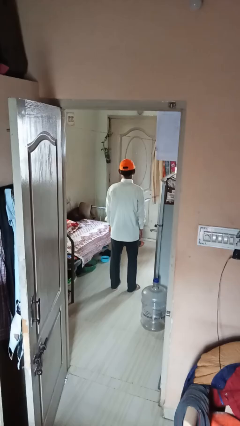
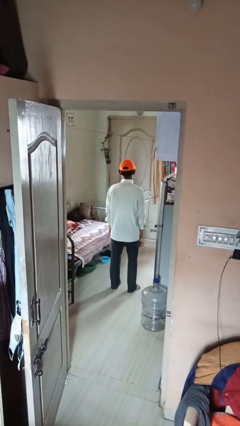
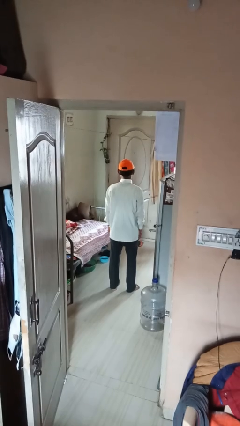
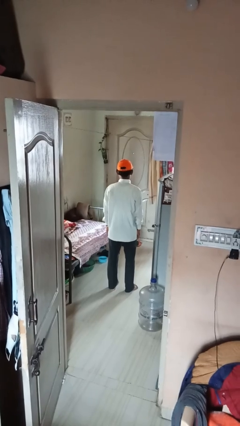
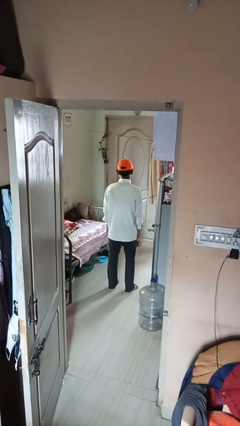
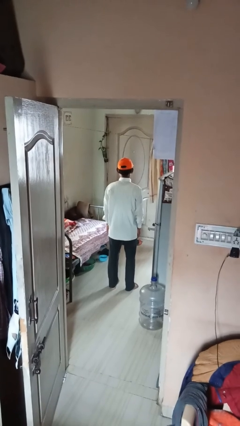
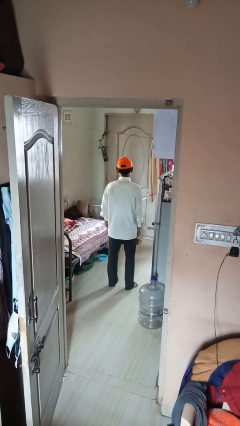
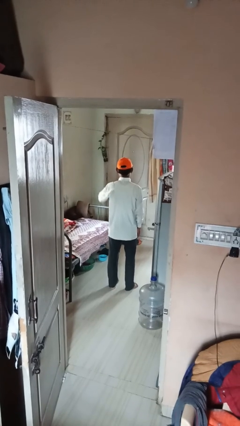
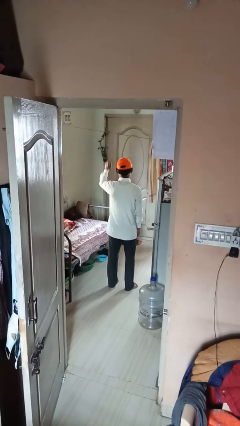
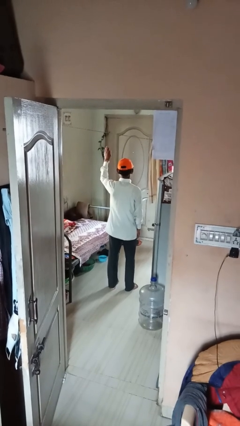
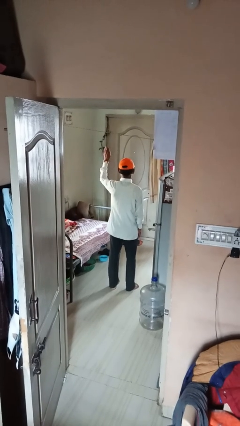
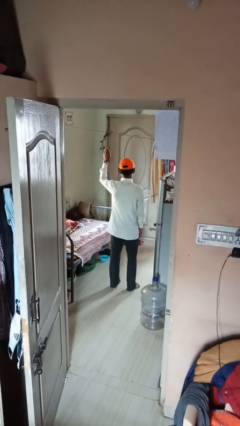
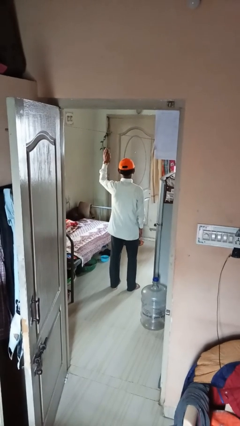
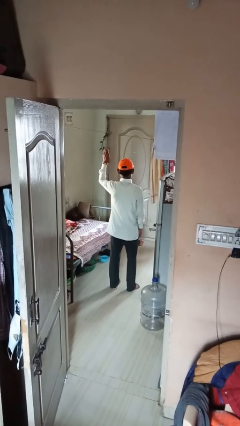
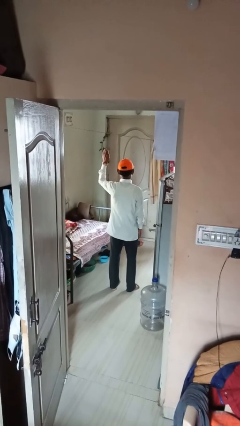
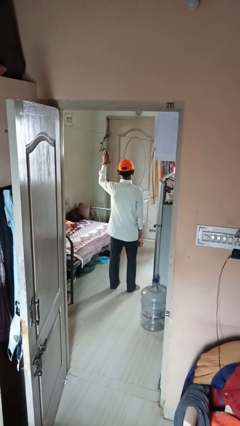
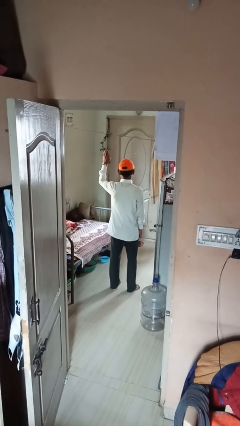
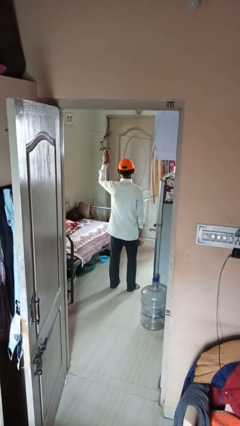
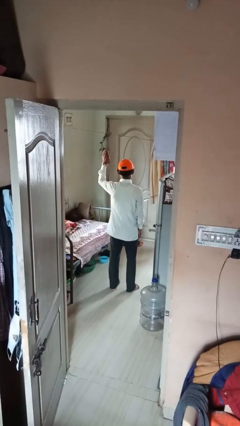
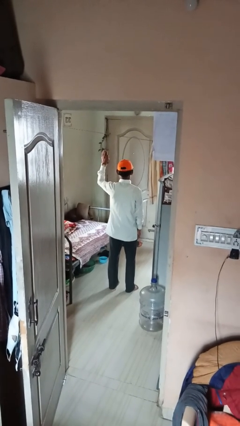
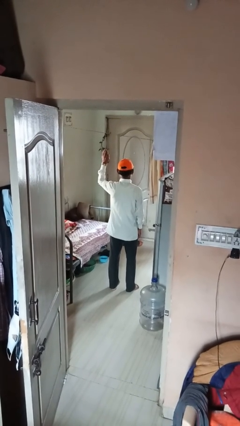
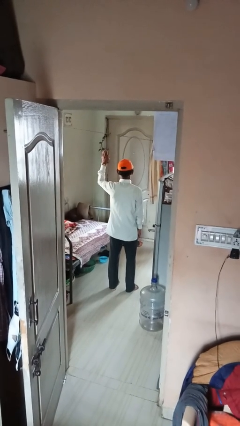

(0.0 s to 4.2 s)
person gestures raise hand

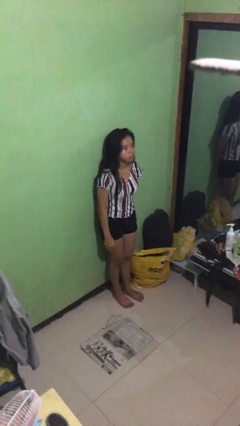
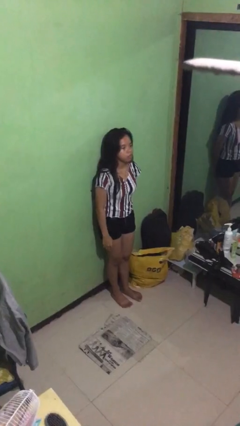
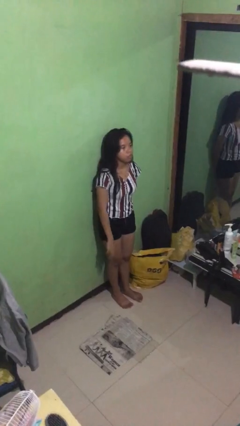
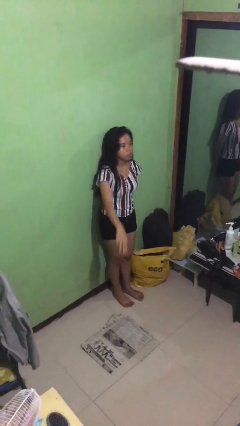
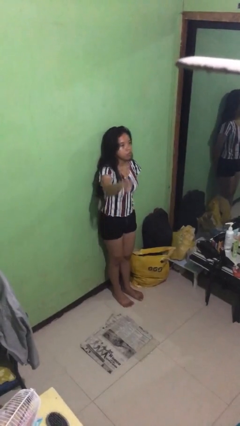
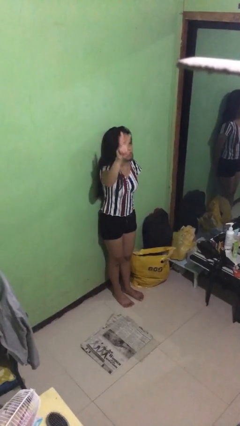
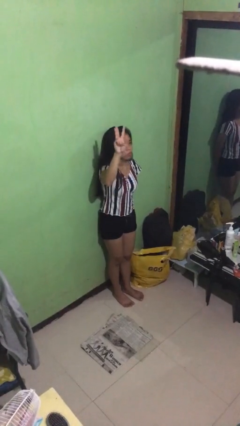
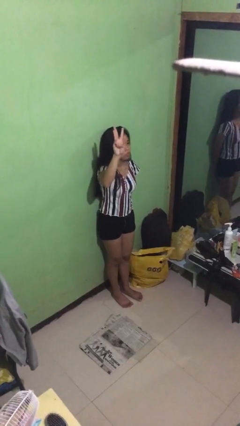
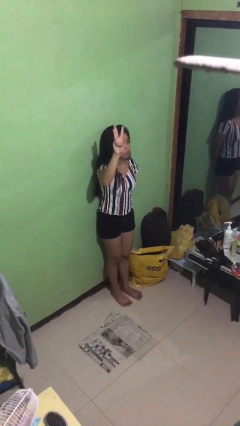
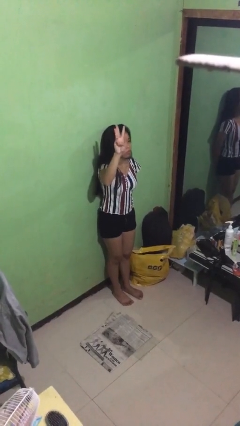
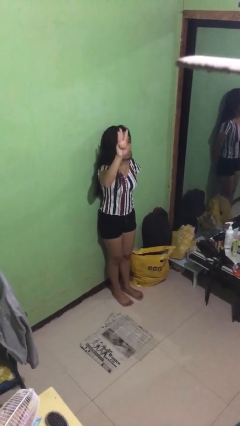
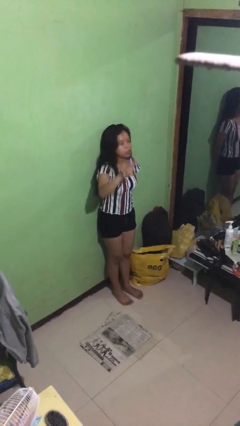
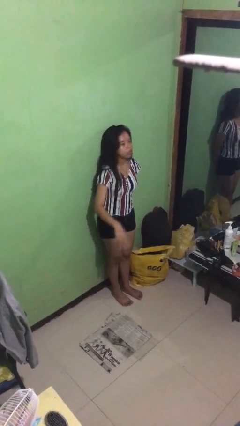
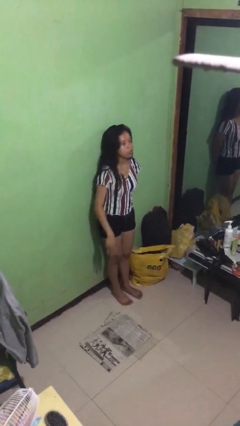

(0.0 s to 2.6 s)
person gestures number three

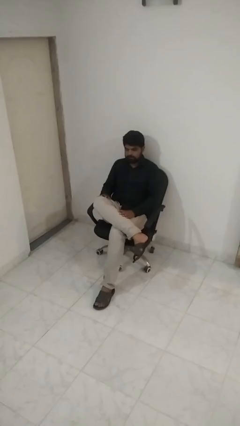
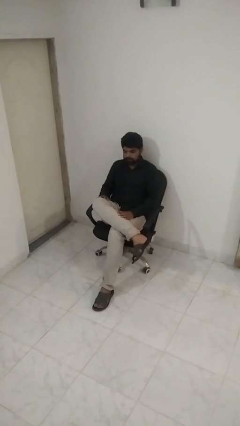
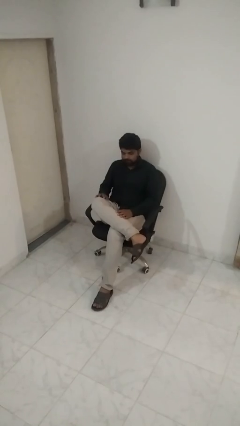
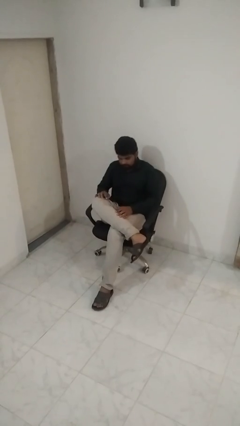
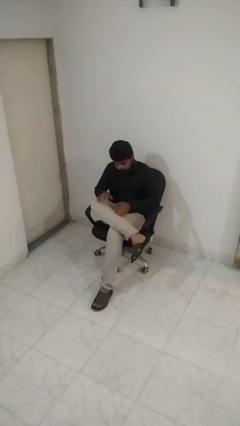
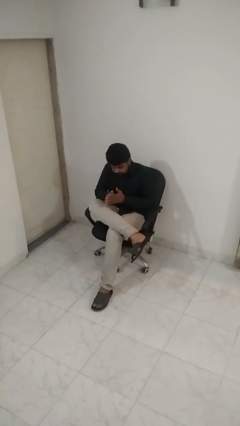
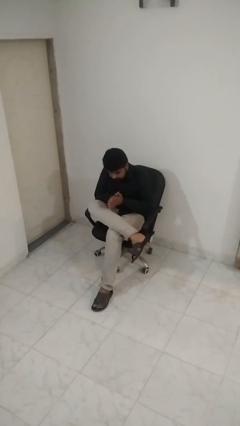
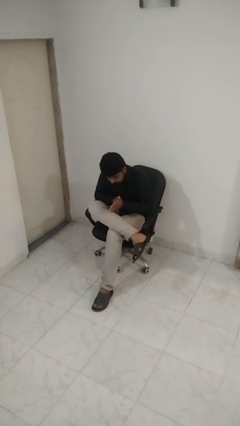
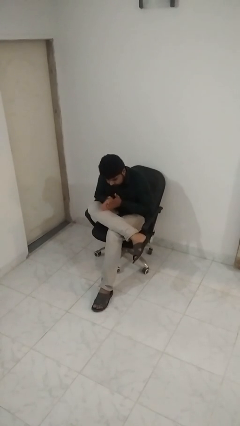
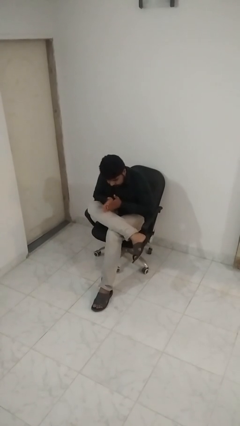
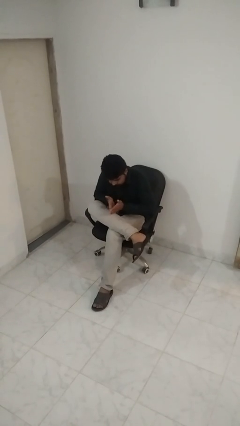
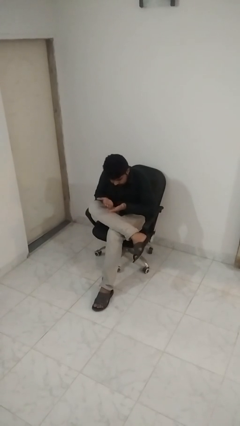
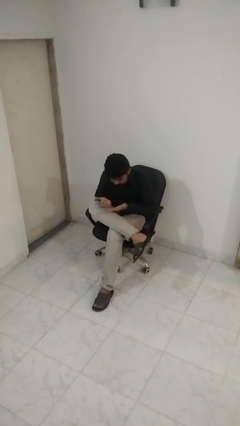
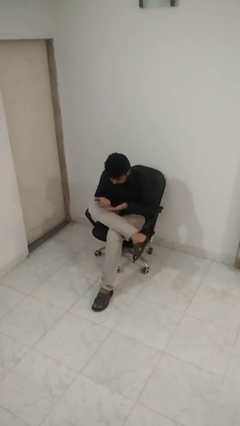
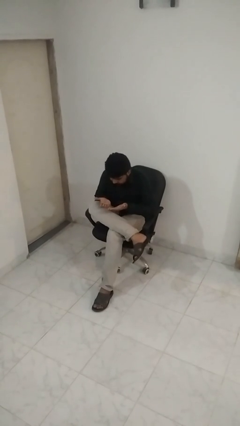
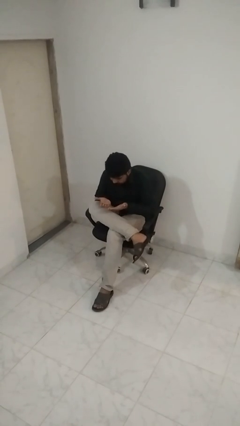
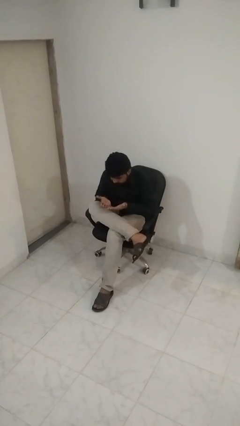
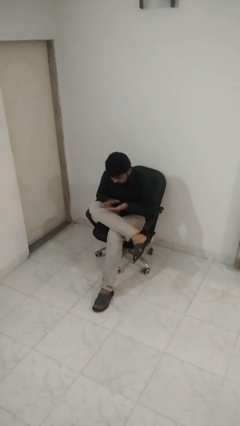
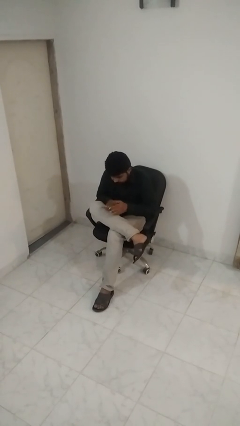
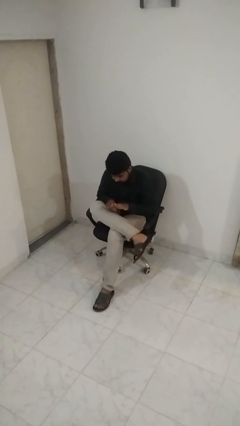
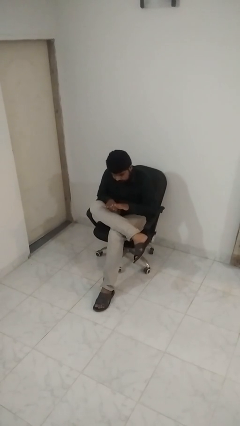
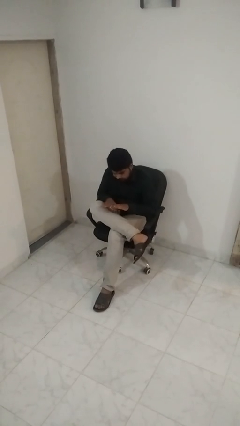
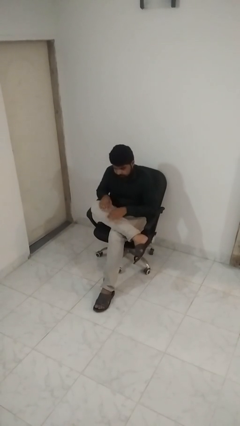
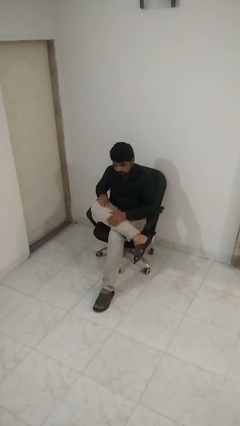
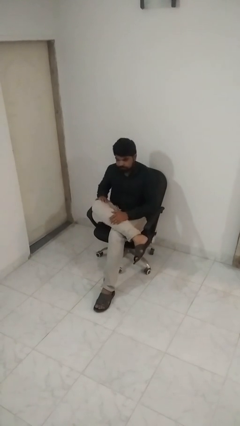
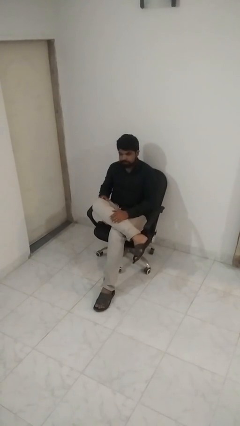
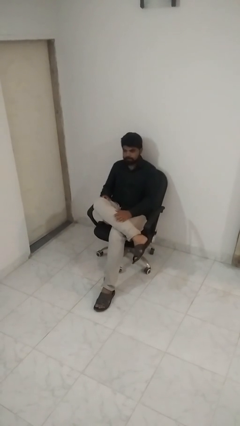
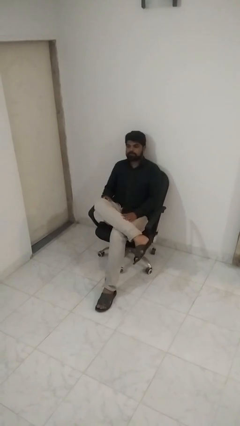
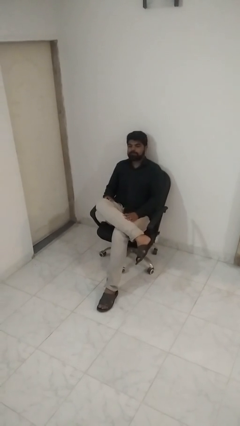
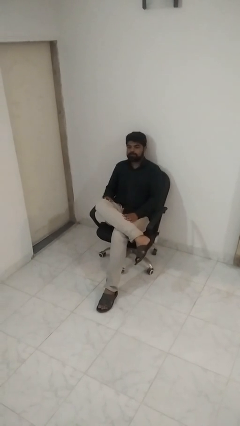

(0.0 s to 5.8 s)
person looks at hands in lap

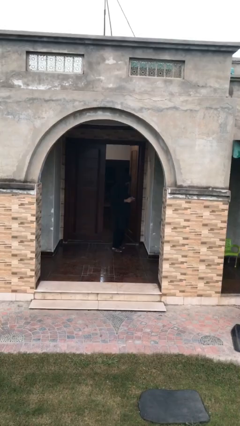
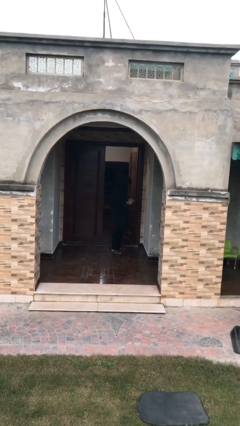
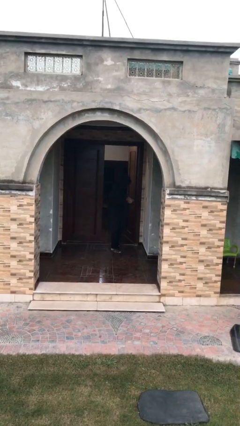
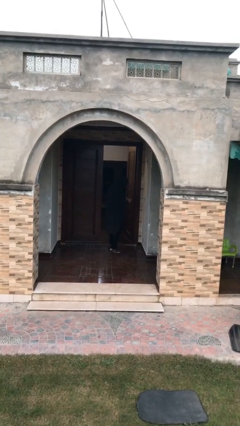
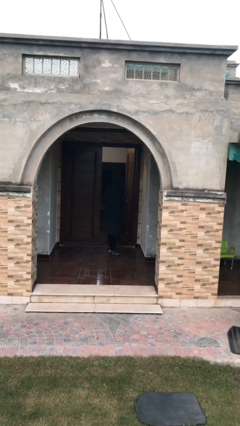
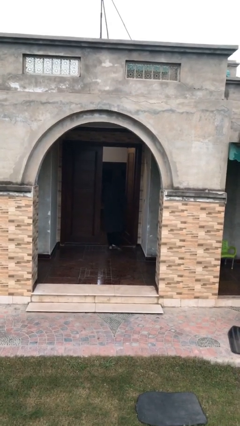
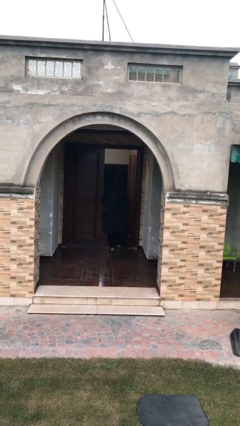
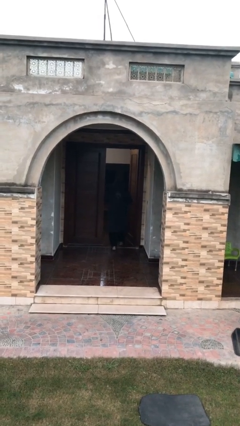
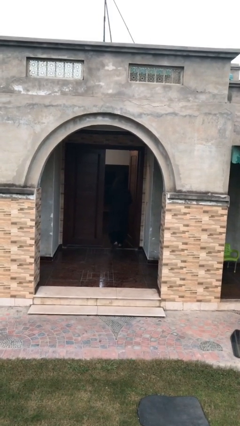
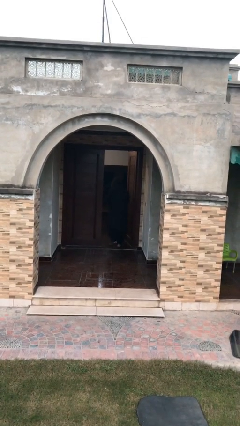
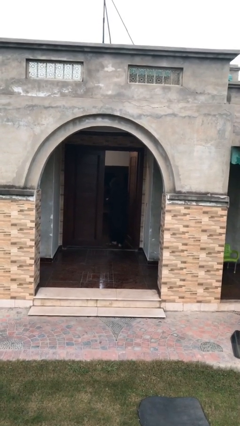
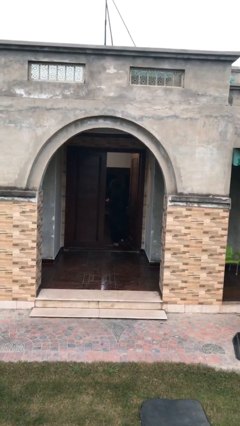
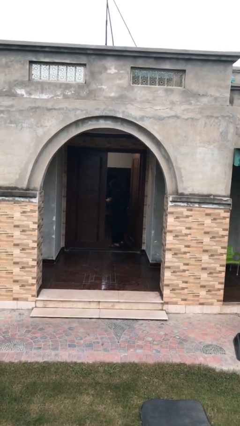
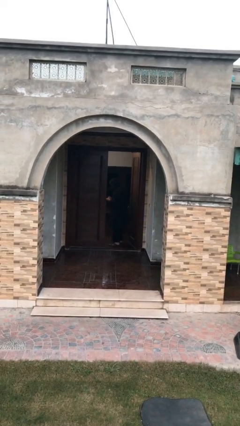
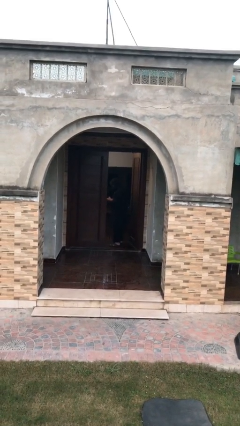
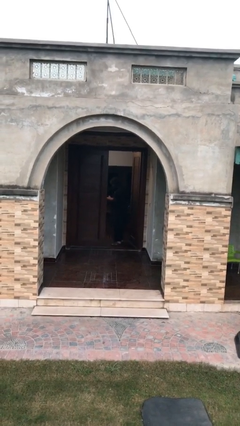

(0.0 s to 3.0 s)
person exits scene through structure

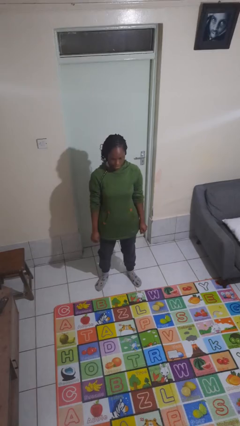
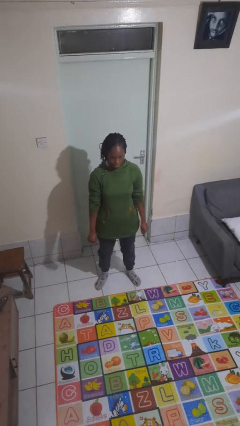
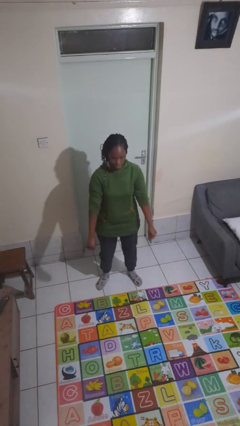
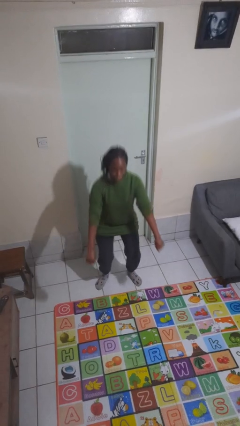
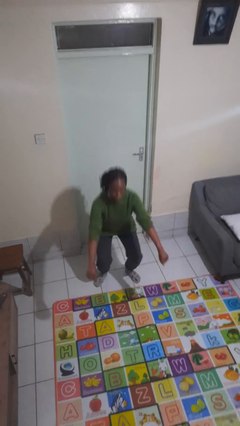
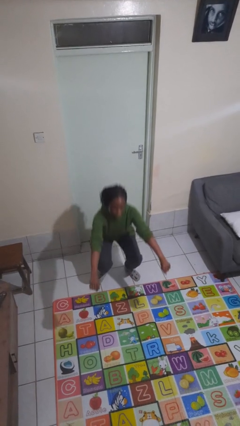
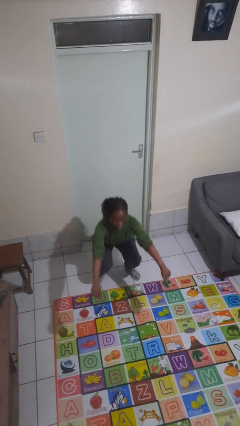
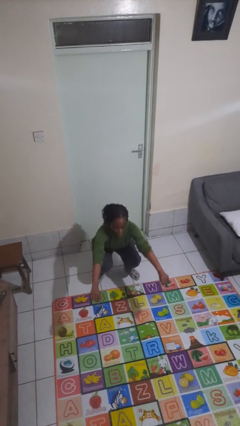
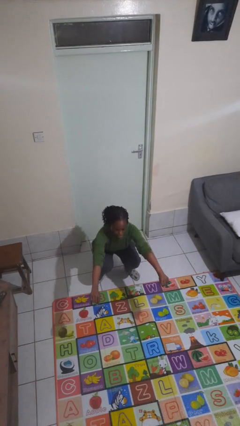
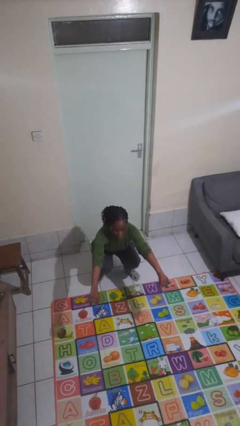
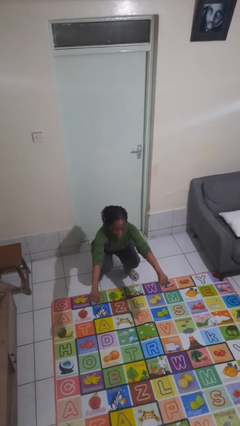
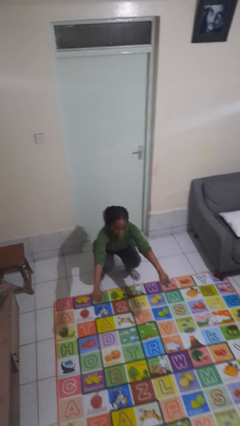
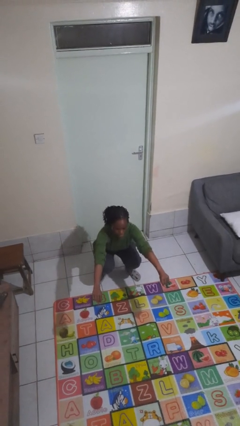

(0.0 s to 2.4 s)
person squats
